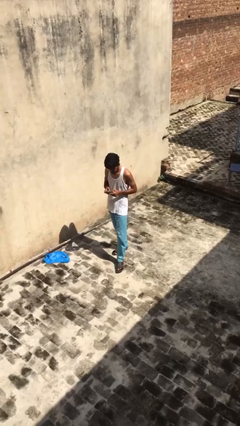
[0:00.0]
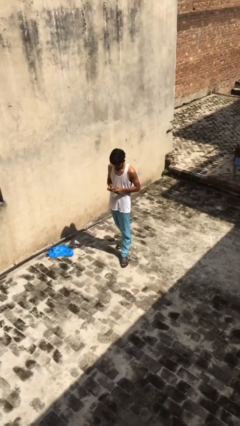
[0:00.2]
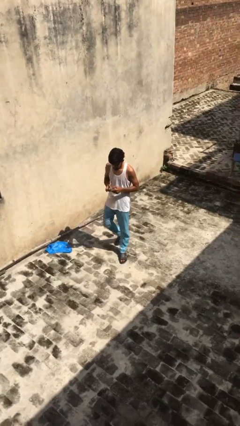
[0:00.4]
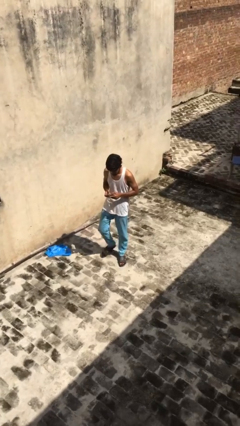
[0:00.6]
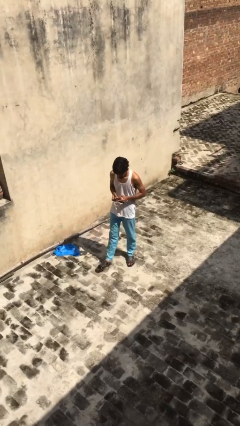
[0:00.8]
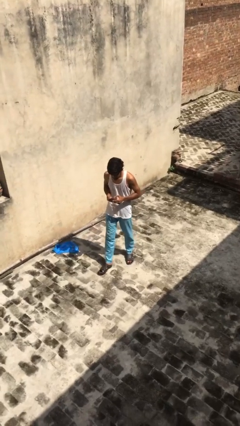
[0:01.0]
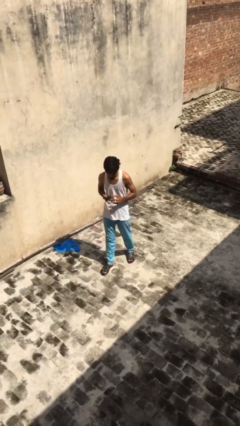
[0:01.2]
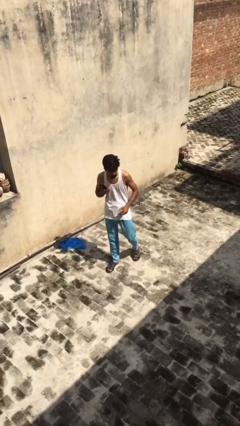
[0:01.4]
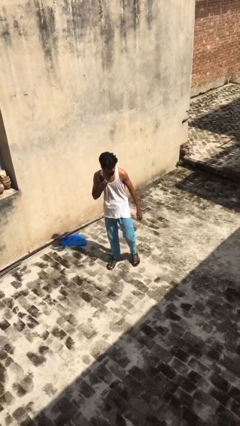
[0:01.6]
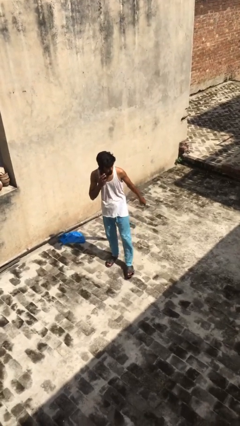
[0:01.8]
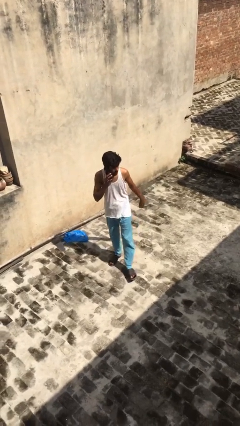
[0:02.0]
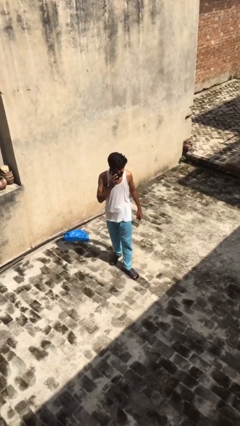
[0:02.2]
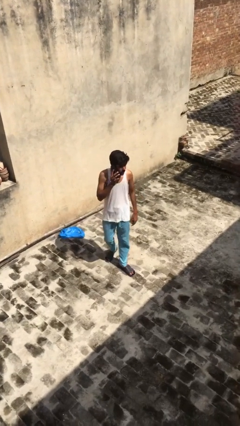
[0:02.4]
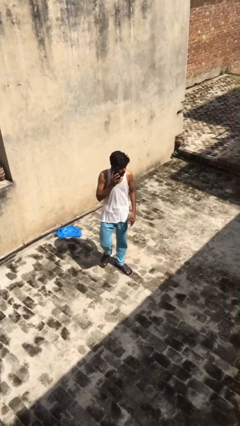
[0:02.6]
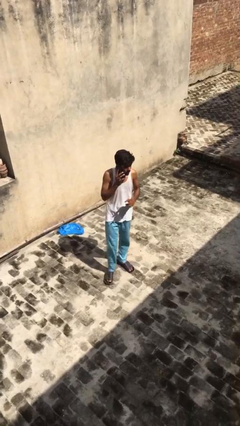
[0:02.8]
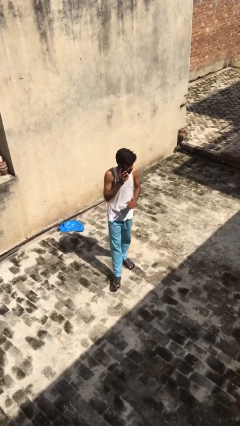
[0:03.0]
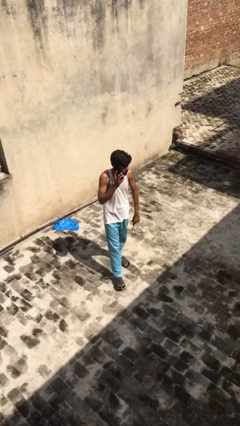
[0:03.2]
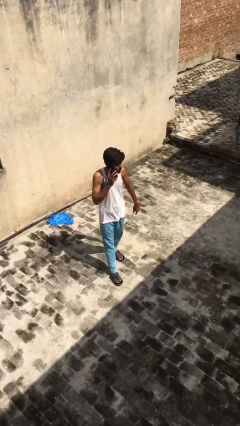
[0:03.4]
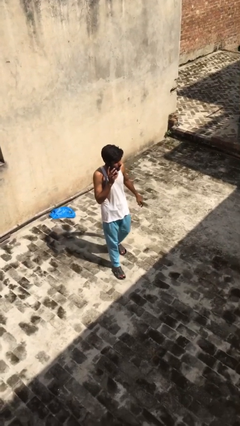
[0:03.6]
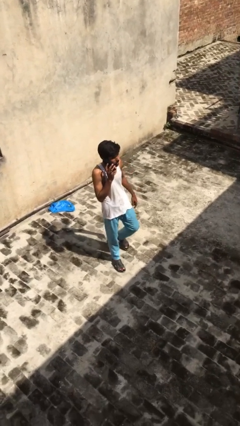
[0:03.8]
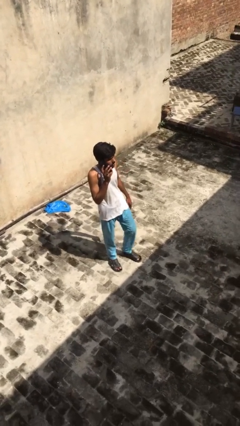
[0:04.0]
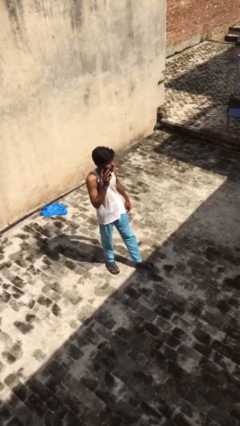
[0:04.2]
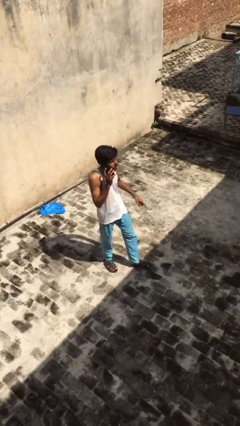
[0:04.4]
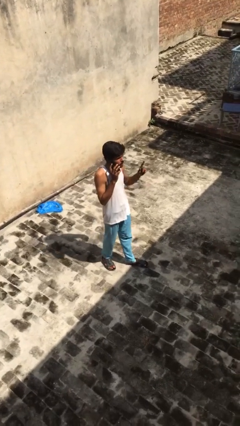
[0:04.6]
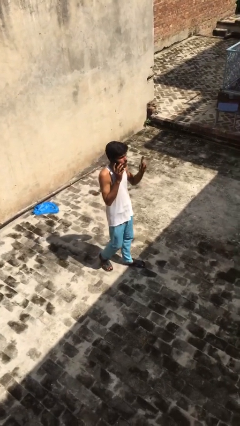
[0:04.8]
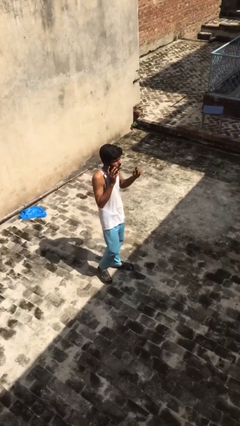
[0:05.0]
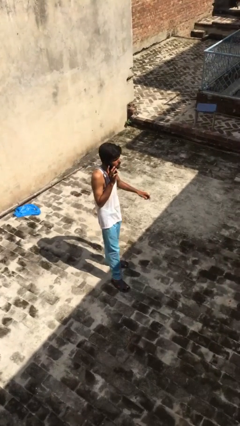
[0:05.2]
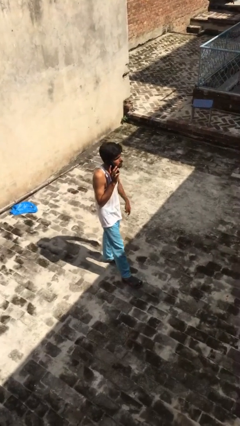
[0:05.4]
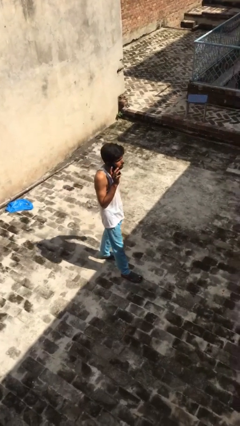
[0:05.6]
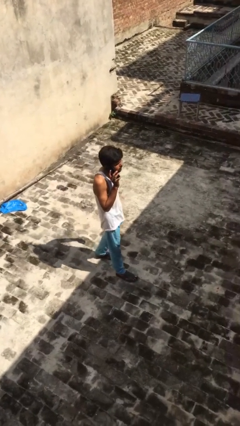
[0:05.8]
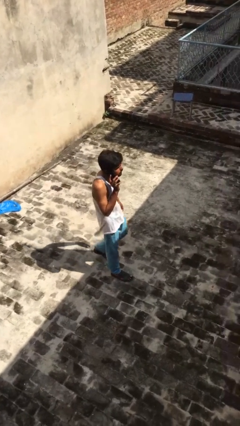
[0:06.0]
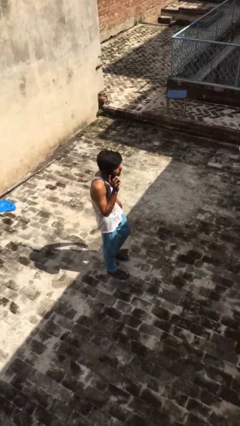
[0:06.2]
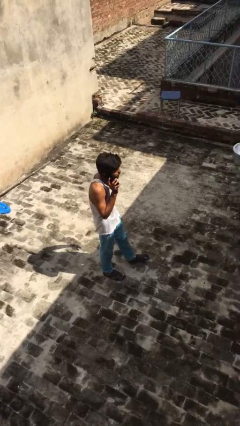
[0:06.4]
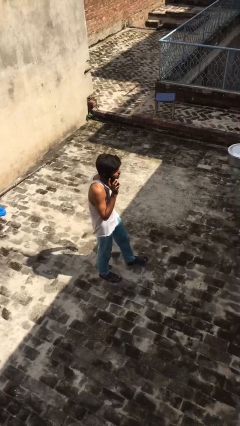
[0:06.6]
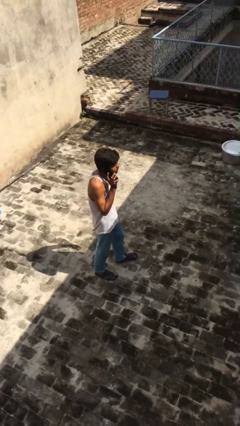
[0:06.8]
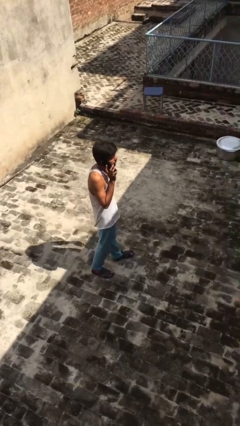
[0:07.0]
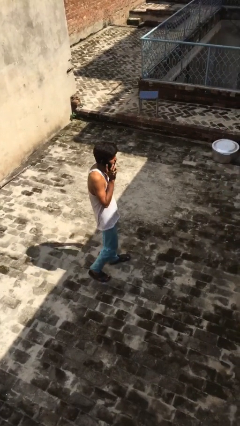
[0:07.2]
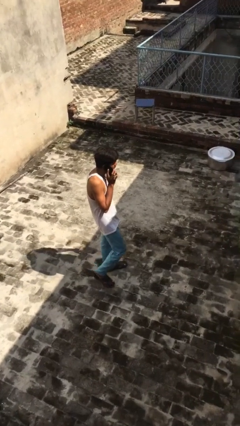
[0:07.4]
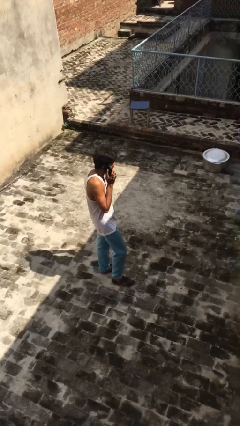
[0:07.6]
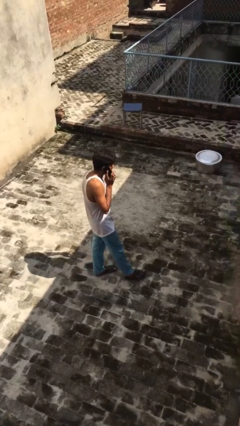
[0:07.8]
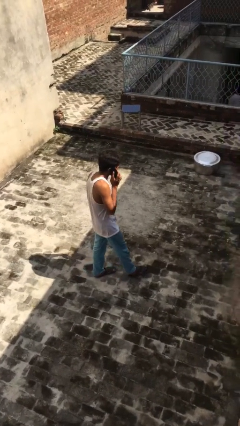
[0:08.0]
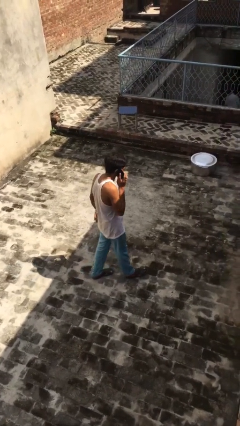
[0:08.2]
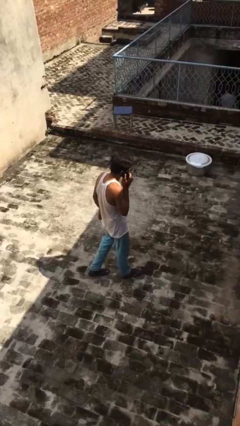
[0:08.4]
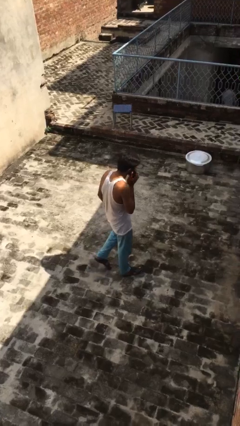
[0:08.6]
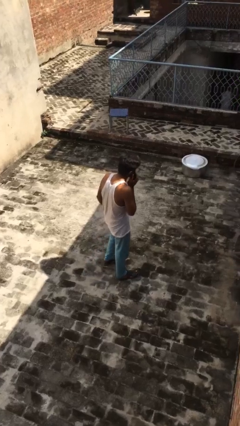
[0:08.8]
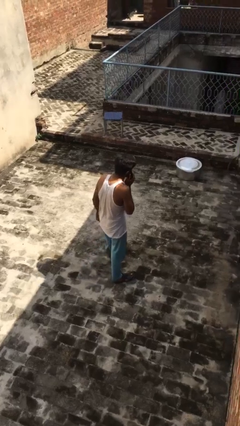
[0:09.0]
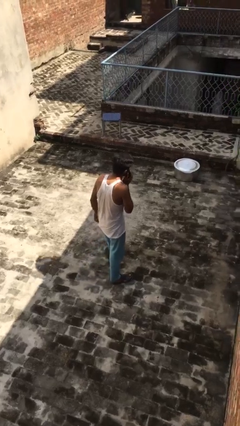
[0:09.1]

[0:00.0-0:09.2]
person talks on phone

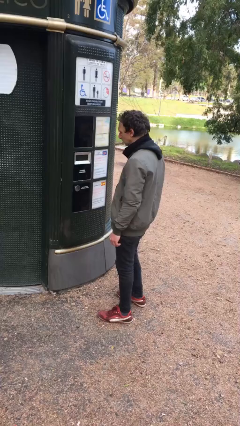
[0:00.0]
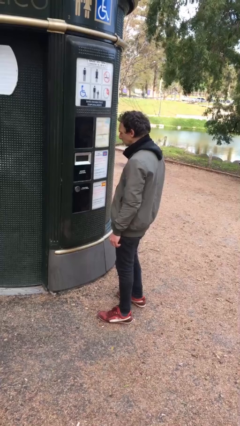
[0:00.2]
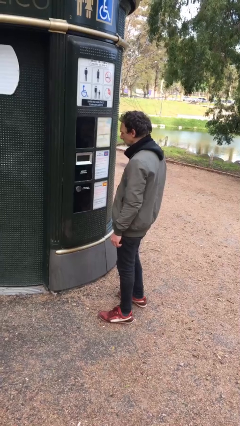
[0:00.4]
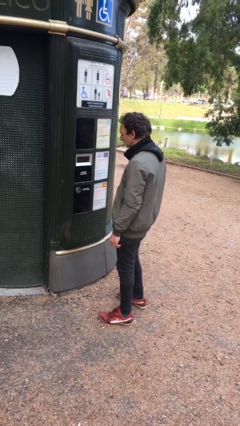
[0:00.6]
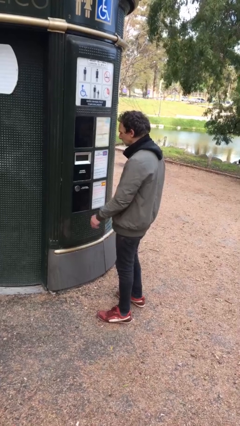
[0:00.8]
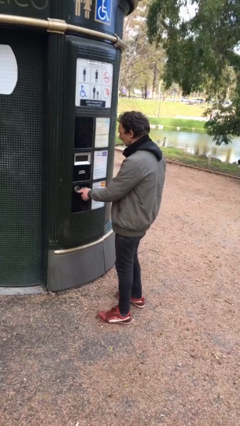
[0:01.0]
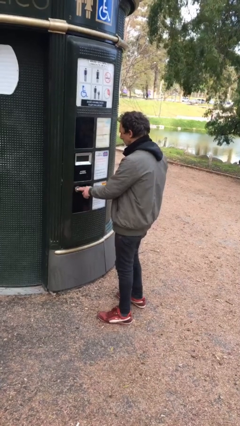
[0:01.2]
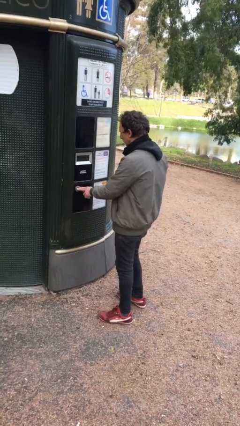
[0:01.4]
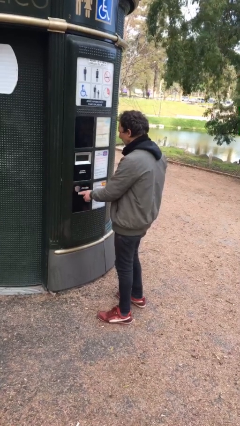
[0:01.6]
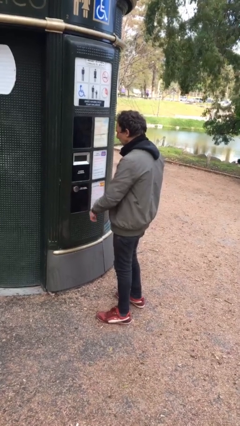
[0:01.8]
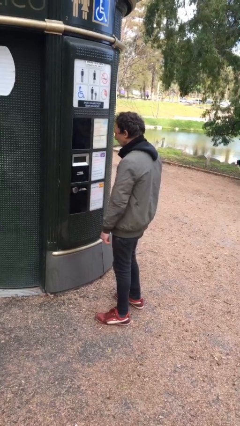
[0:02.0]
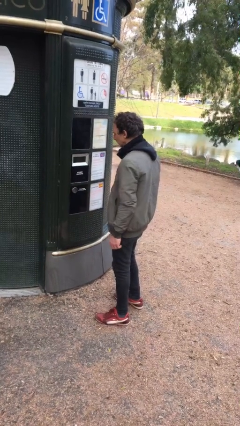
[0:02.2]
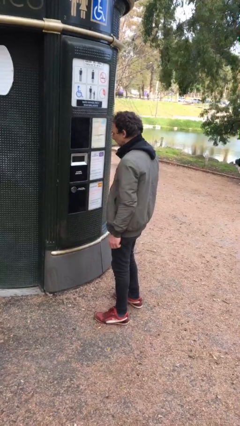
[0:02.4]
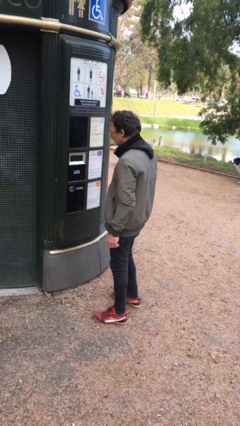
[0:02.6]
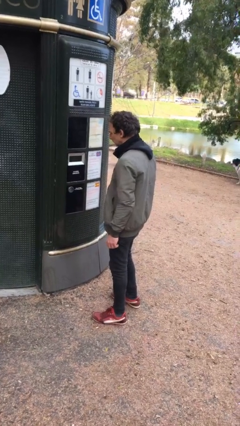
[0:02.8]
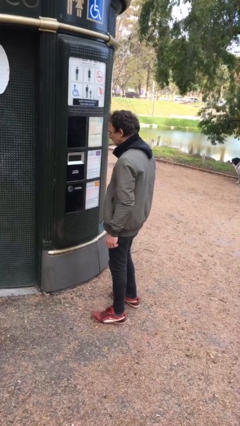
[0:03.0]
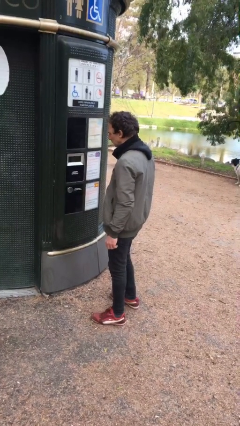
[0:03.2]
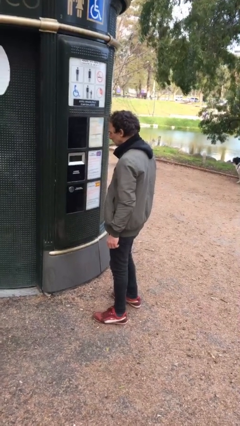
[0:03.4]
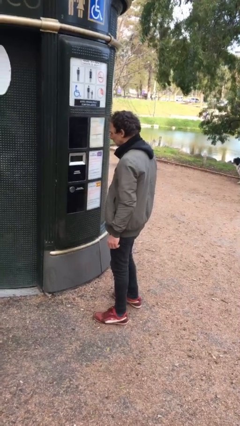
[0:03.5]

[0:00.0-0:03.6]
person purchases from machine

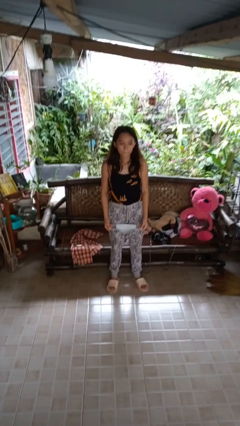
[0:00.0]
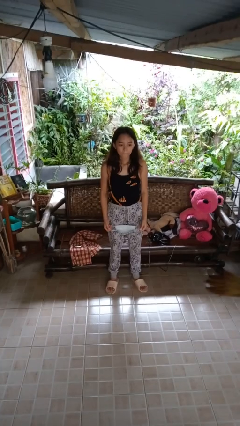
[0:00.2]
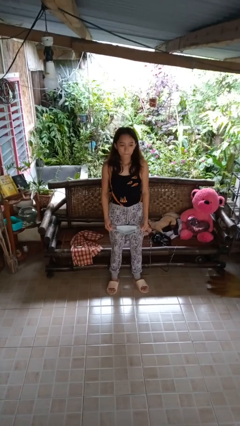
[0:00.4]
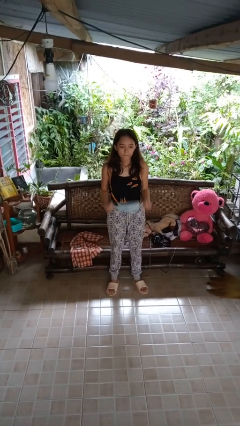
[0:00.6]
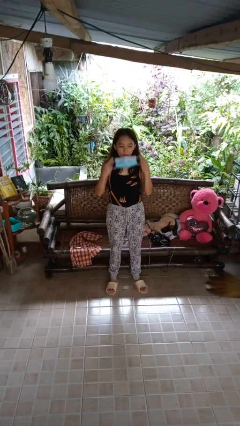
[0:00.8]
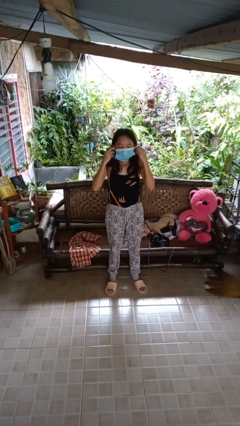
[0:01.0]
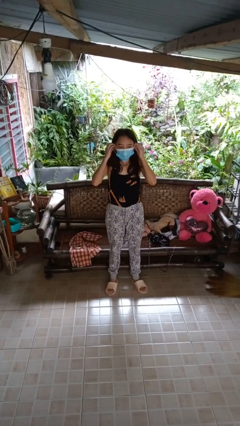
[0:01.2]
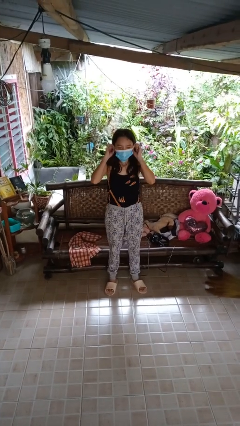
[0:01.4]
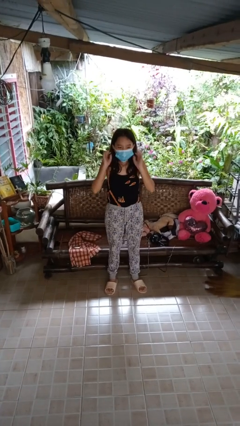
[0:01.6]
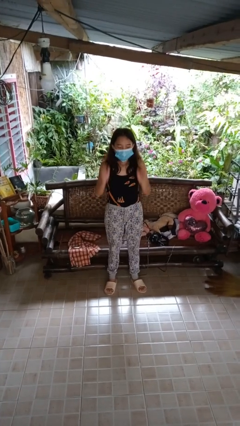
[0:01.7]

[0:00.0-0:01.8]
person puts on facemask

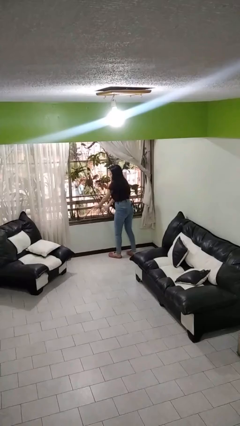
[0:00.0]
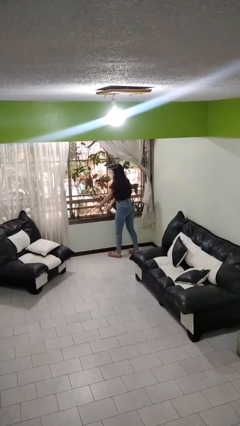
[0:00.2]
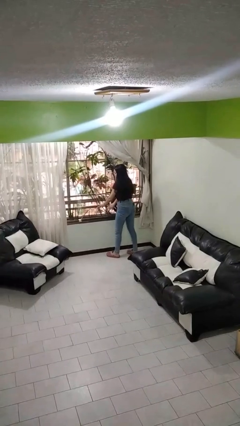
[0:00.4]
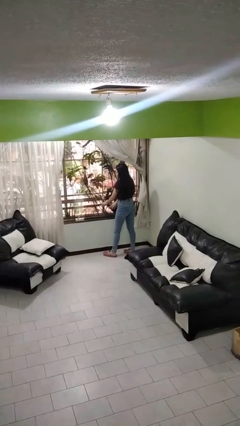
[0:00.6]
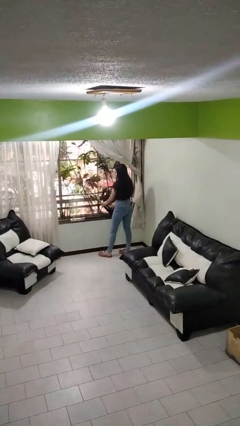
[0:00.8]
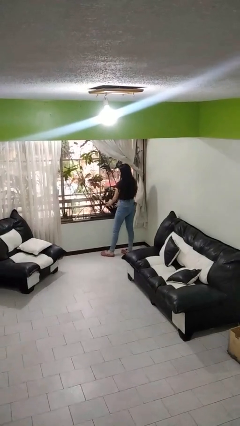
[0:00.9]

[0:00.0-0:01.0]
person opens home window

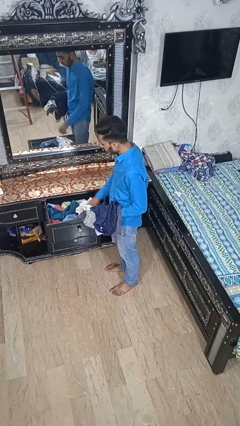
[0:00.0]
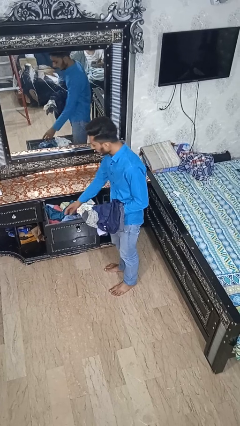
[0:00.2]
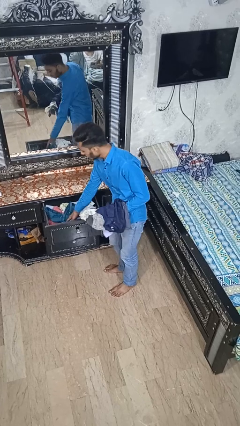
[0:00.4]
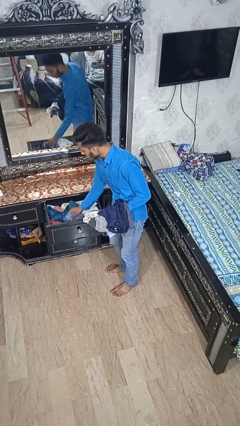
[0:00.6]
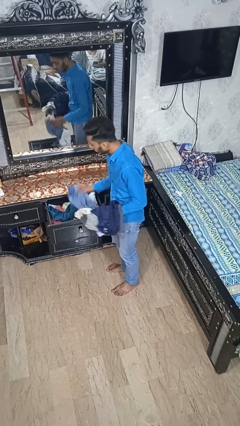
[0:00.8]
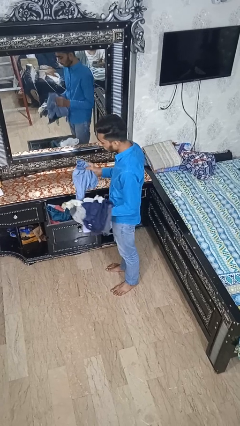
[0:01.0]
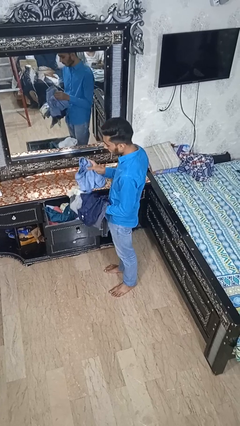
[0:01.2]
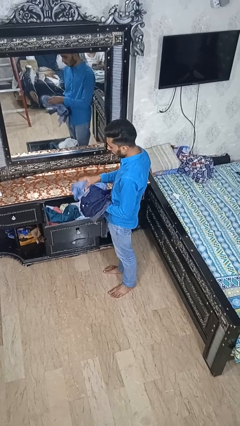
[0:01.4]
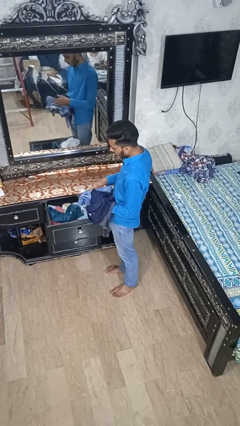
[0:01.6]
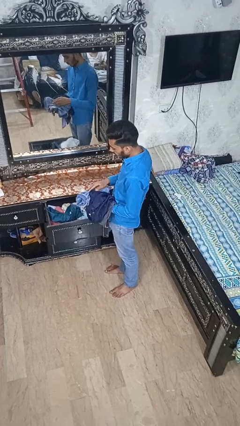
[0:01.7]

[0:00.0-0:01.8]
person takes clothes from dresser

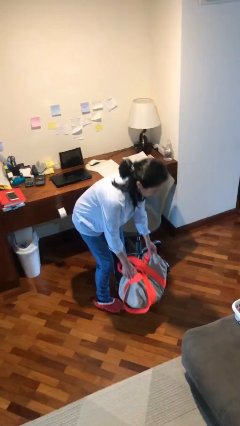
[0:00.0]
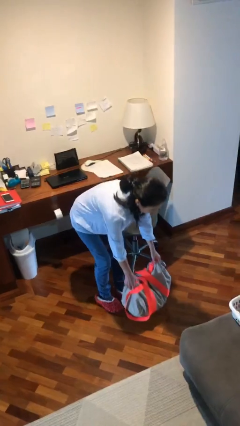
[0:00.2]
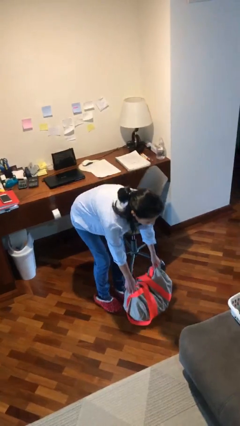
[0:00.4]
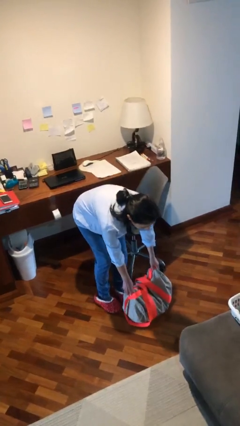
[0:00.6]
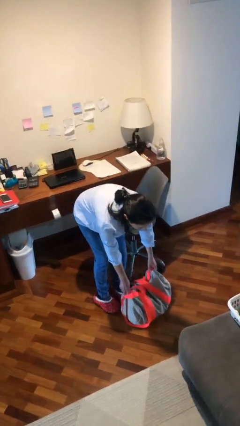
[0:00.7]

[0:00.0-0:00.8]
person puts down object on floor
